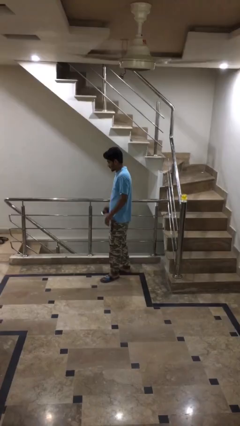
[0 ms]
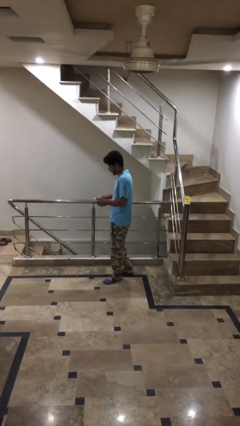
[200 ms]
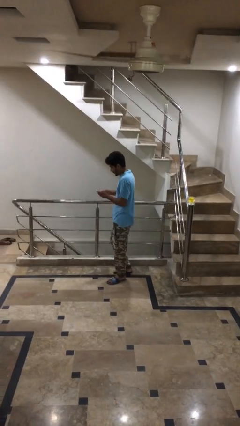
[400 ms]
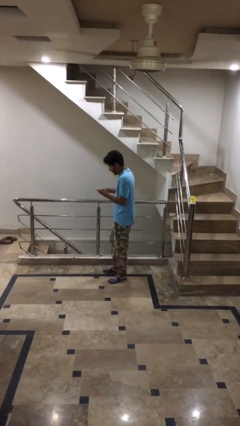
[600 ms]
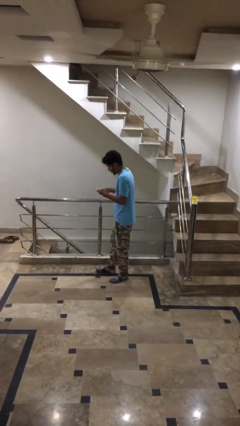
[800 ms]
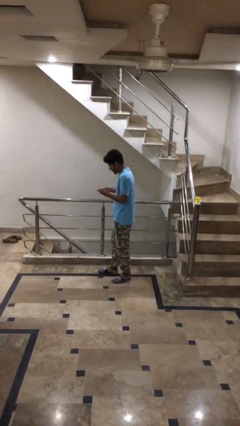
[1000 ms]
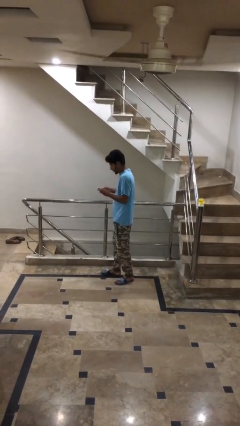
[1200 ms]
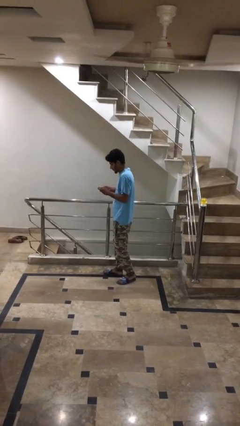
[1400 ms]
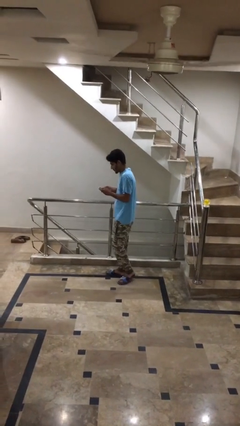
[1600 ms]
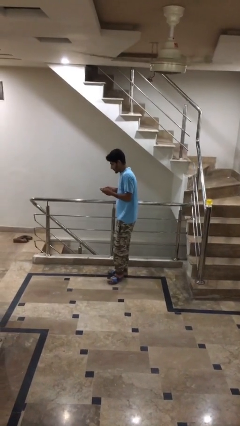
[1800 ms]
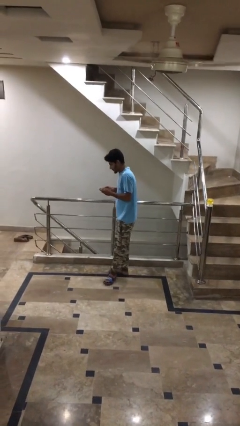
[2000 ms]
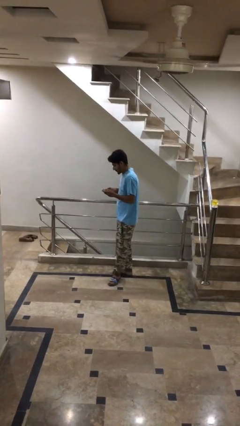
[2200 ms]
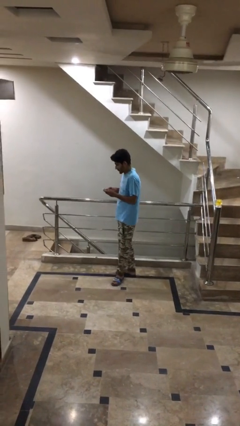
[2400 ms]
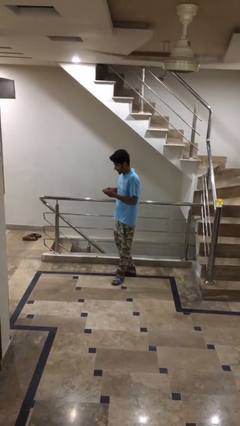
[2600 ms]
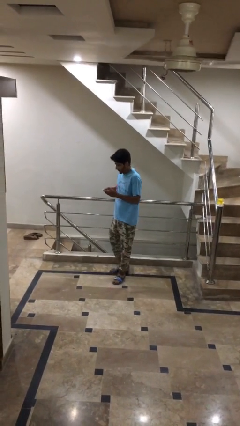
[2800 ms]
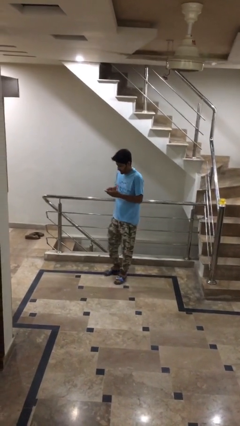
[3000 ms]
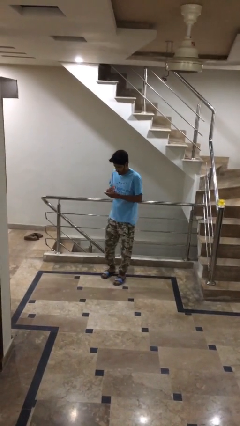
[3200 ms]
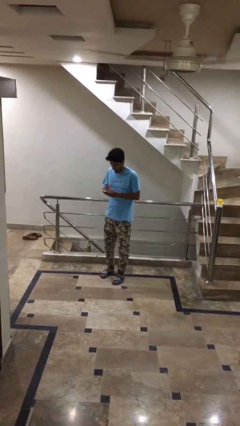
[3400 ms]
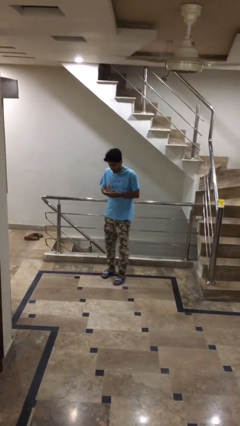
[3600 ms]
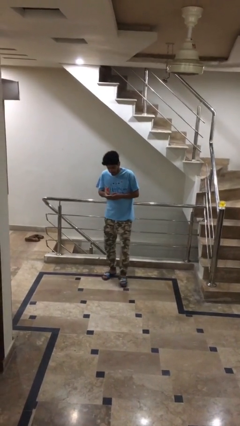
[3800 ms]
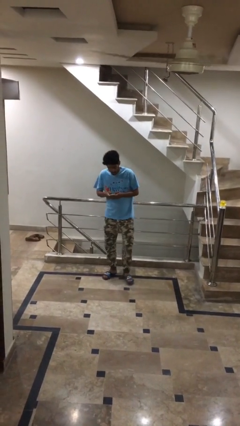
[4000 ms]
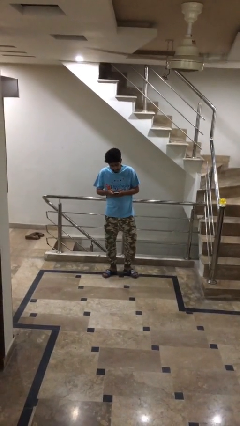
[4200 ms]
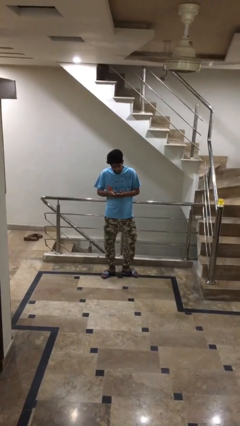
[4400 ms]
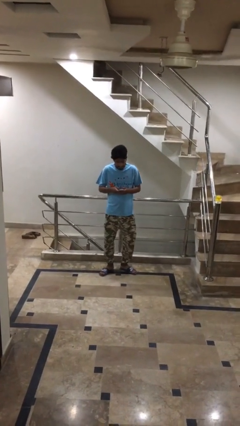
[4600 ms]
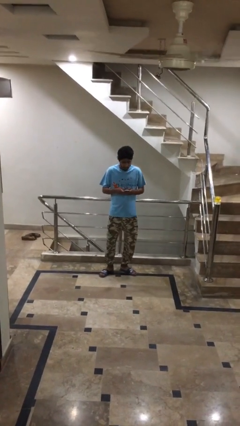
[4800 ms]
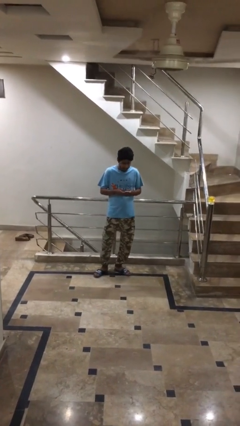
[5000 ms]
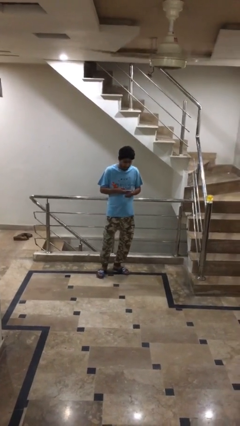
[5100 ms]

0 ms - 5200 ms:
person texts on phone

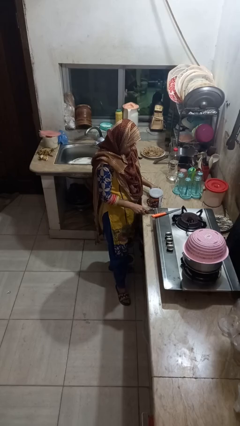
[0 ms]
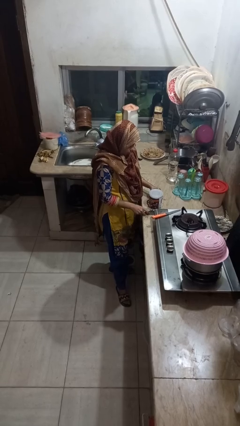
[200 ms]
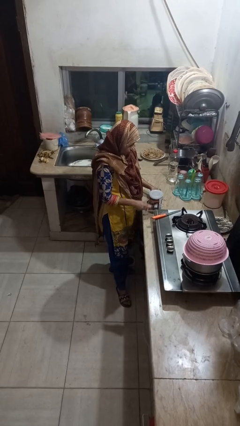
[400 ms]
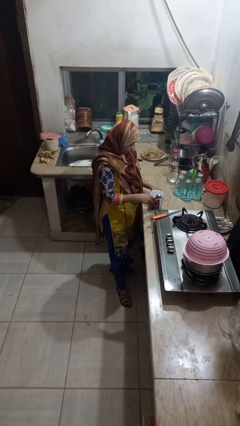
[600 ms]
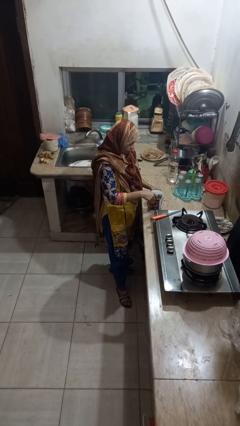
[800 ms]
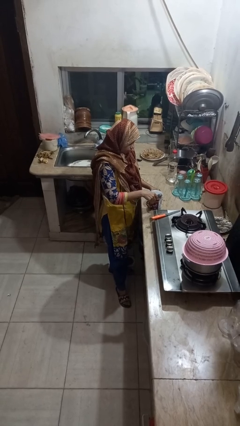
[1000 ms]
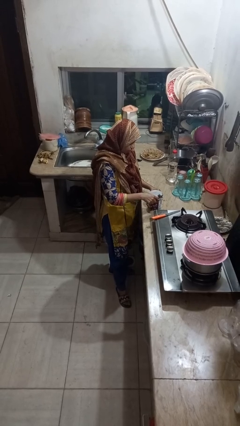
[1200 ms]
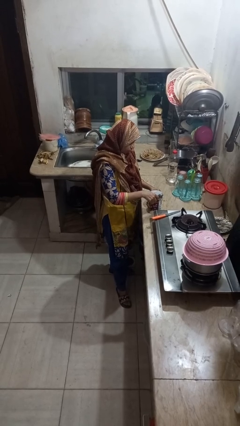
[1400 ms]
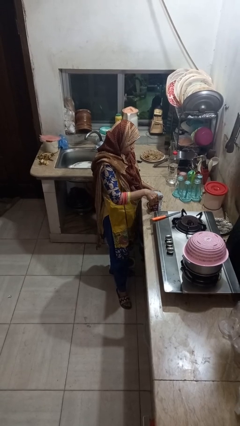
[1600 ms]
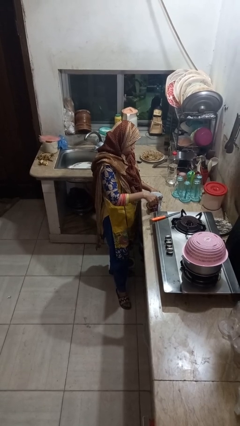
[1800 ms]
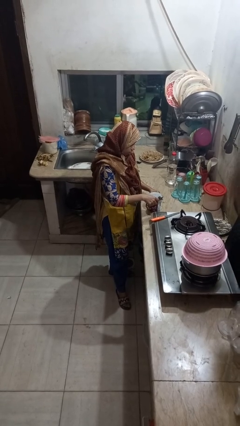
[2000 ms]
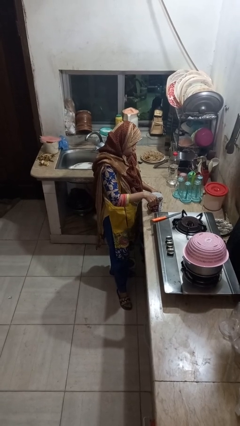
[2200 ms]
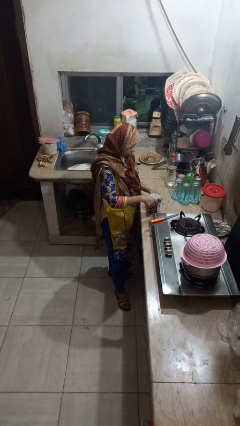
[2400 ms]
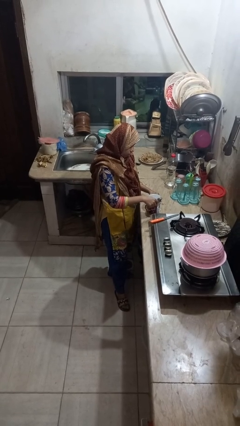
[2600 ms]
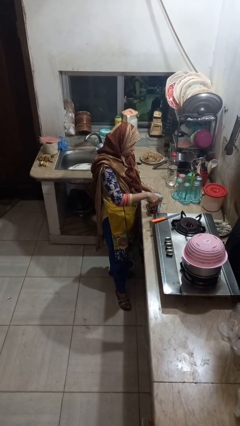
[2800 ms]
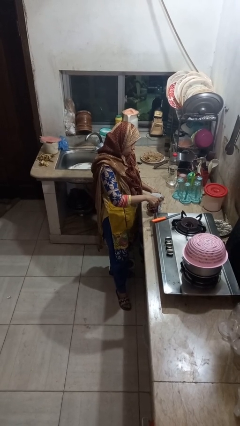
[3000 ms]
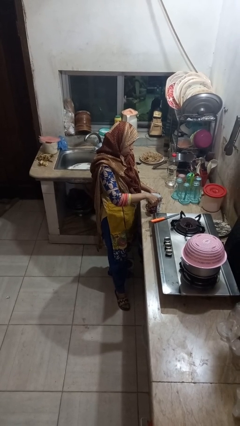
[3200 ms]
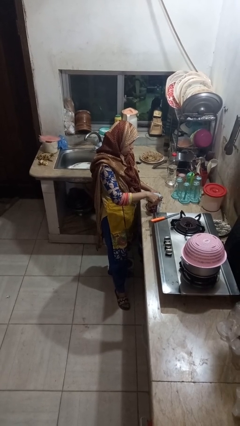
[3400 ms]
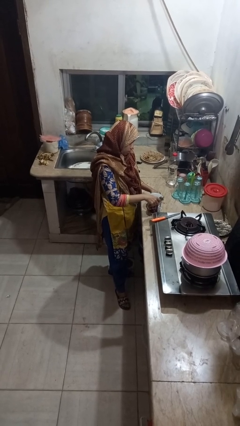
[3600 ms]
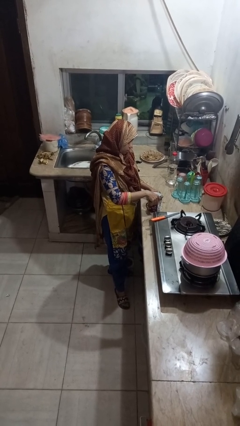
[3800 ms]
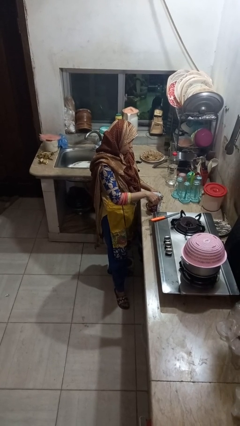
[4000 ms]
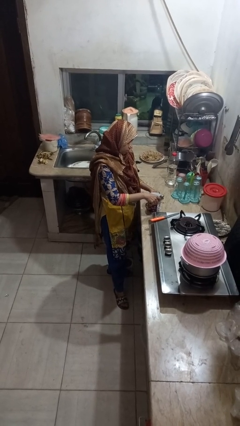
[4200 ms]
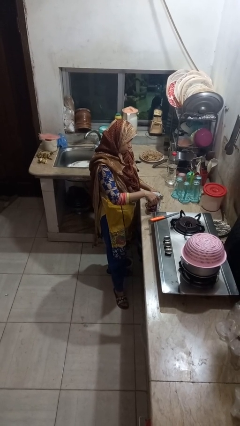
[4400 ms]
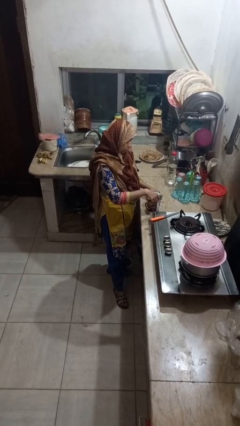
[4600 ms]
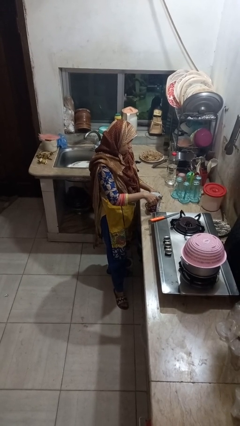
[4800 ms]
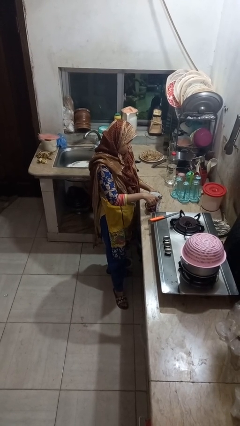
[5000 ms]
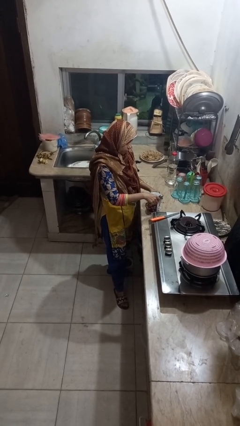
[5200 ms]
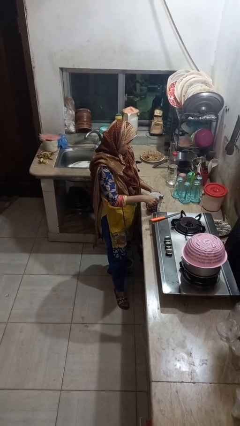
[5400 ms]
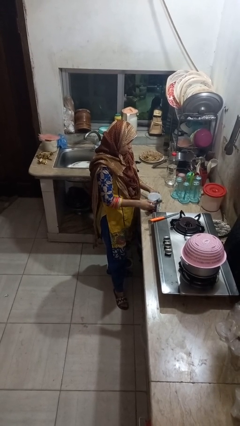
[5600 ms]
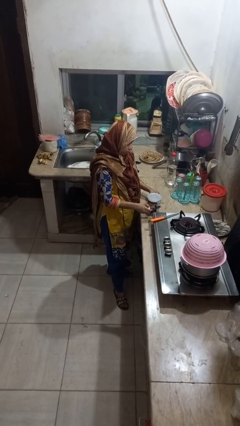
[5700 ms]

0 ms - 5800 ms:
person opens can with can opener

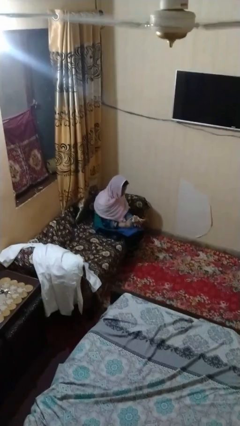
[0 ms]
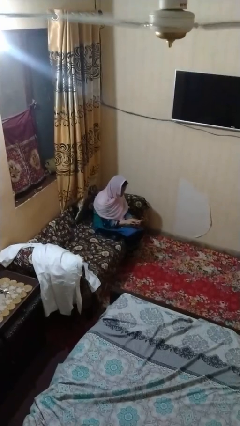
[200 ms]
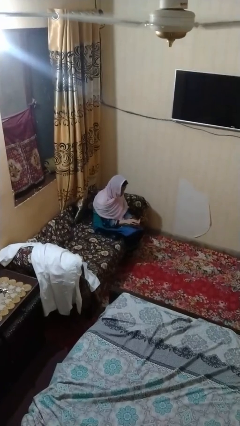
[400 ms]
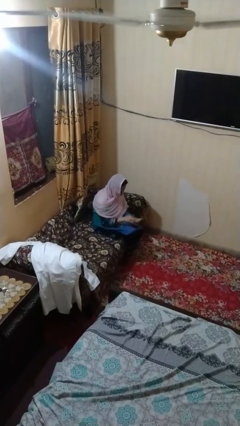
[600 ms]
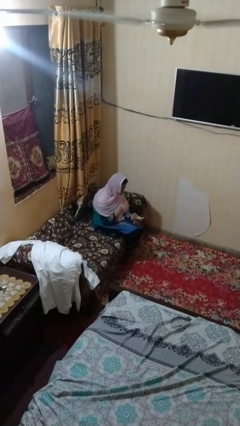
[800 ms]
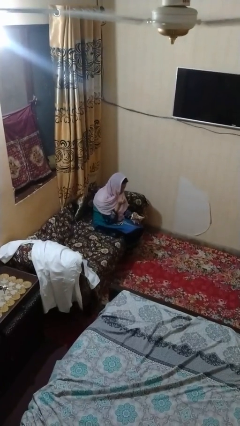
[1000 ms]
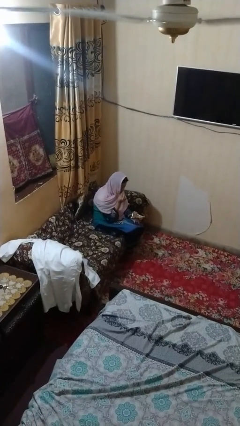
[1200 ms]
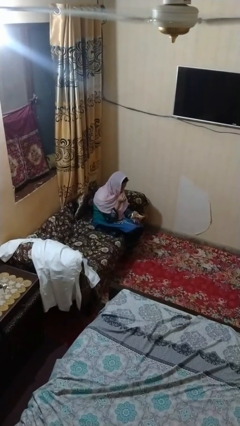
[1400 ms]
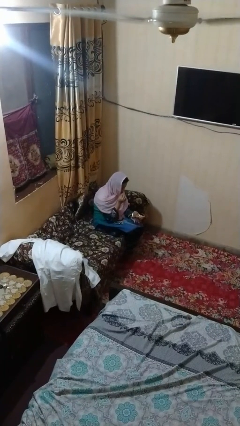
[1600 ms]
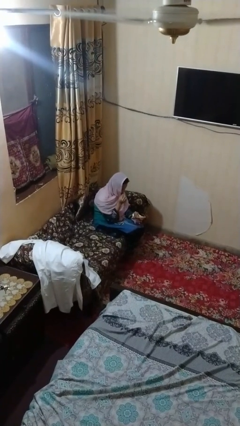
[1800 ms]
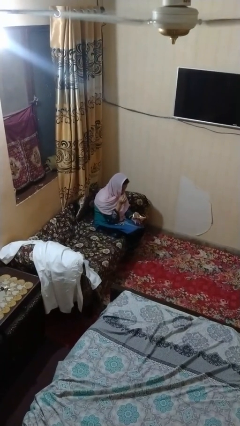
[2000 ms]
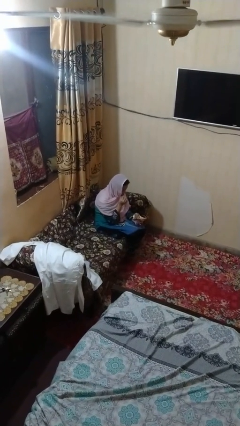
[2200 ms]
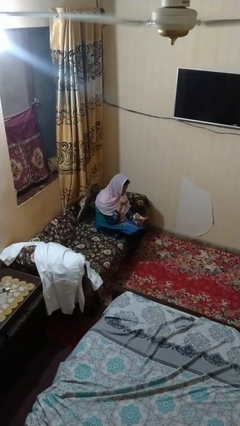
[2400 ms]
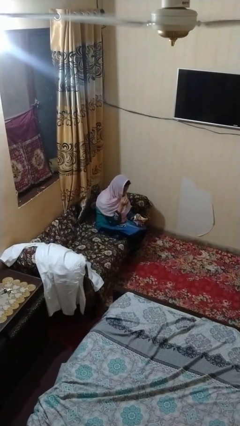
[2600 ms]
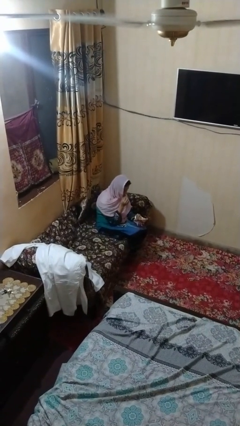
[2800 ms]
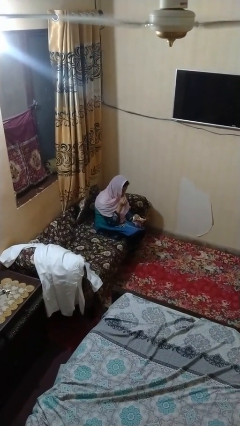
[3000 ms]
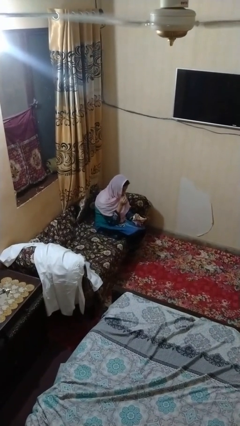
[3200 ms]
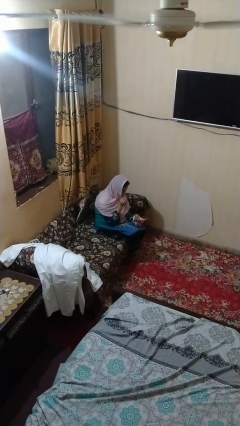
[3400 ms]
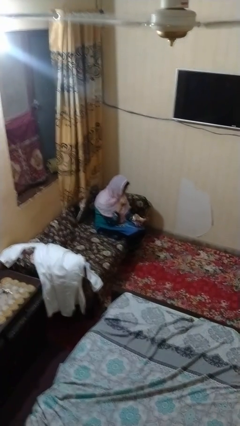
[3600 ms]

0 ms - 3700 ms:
person eats snack from bag

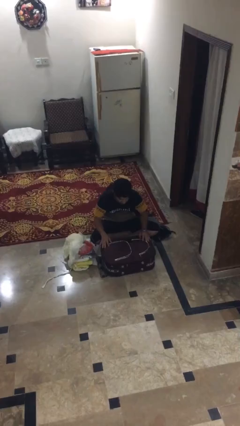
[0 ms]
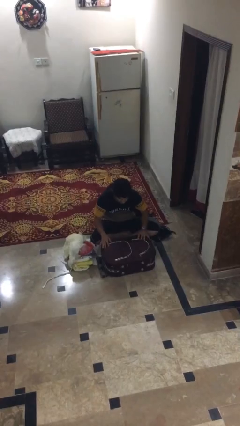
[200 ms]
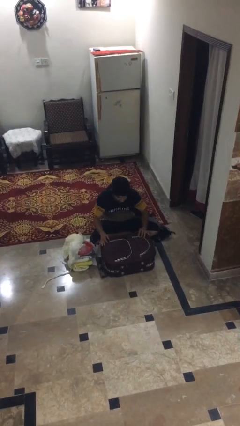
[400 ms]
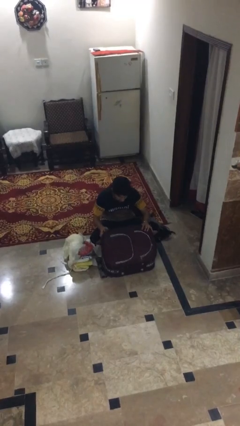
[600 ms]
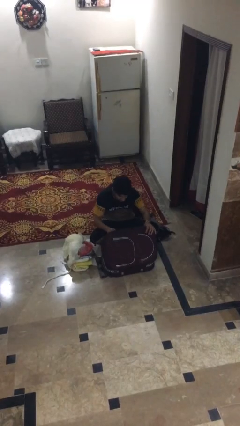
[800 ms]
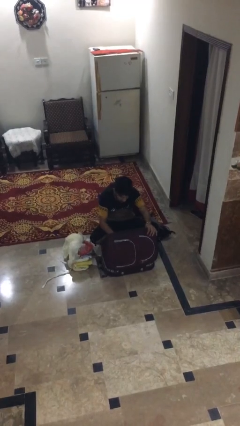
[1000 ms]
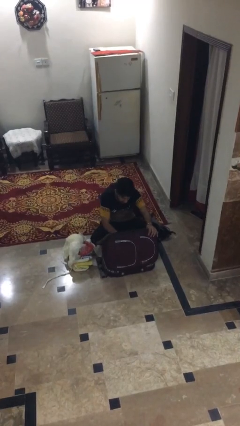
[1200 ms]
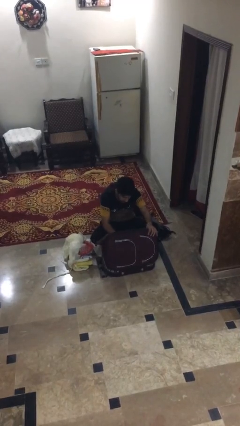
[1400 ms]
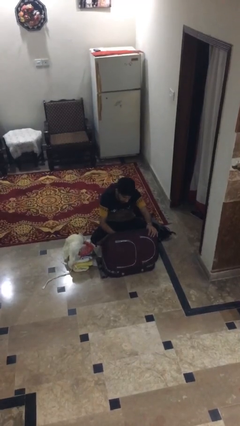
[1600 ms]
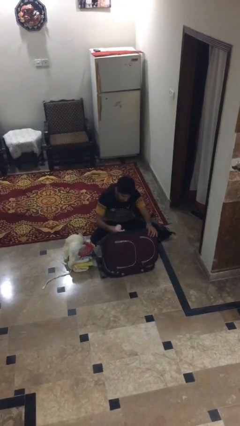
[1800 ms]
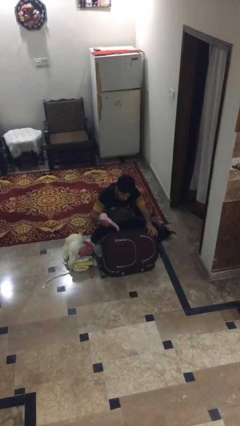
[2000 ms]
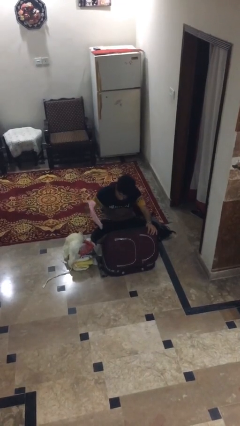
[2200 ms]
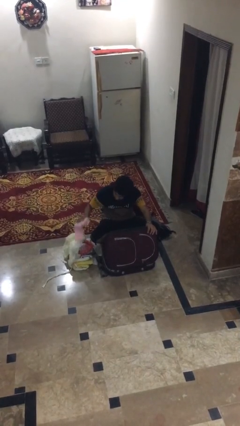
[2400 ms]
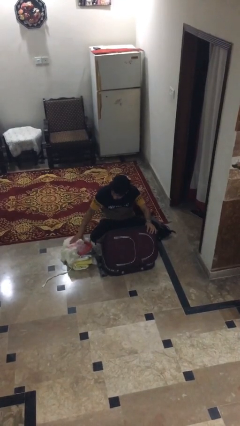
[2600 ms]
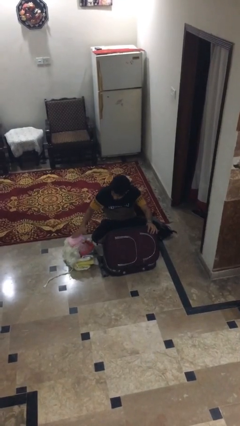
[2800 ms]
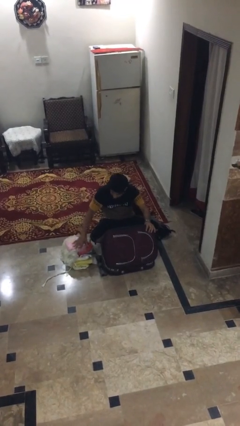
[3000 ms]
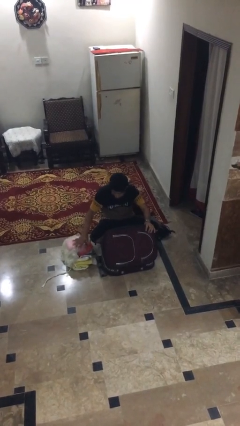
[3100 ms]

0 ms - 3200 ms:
person unloads clothes from suitcase

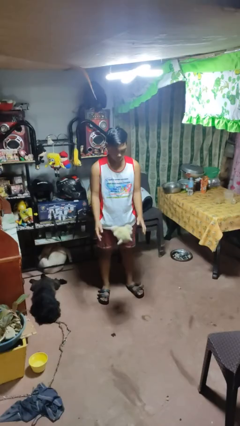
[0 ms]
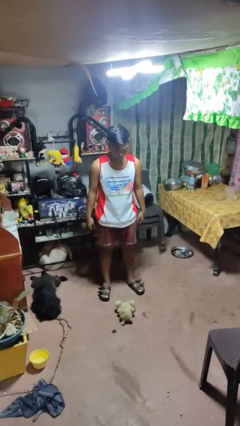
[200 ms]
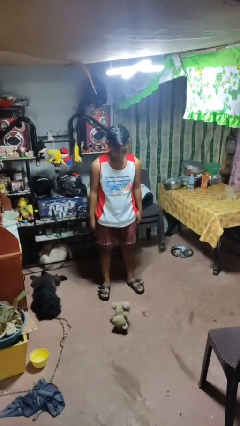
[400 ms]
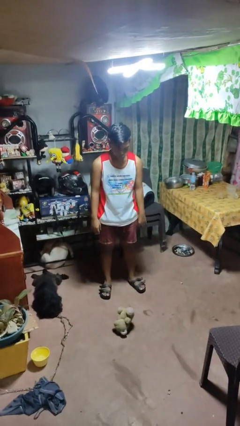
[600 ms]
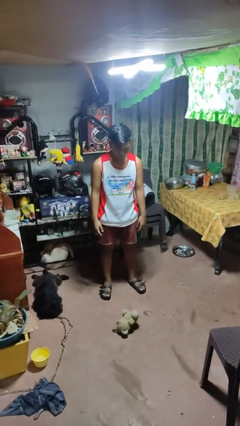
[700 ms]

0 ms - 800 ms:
person drops object
